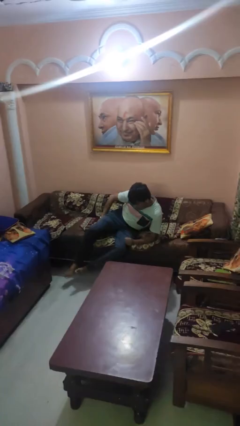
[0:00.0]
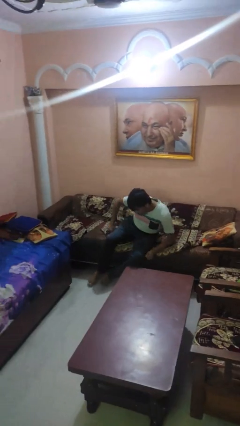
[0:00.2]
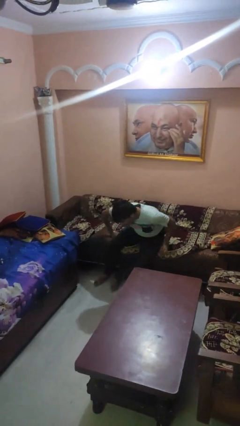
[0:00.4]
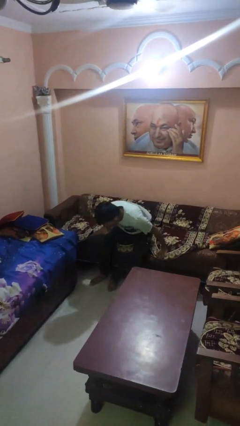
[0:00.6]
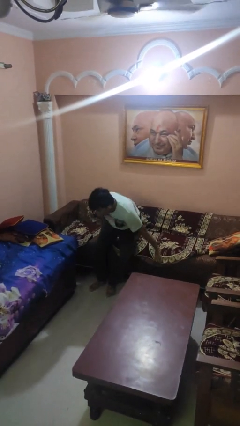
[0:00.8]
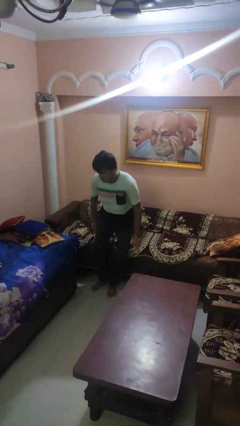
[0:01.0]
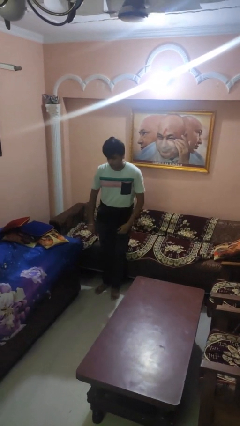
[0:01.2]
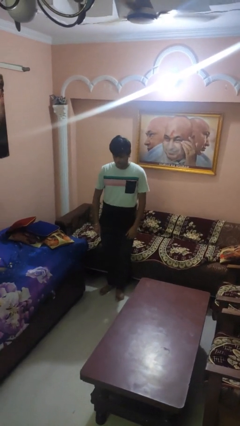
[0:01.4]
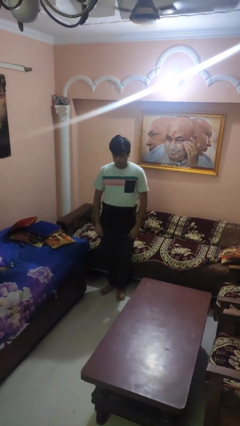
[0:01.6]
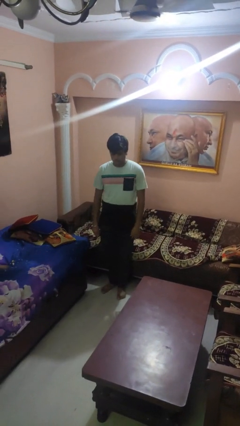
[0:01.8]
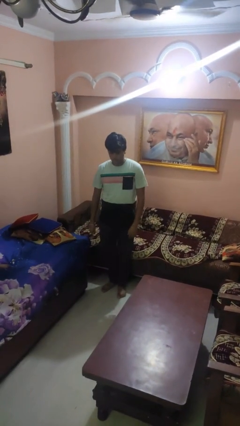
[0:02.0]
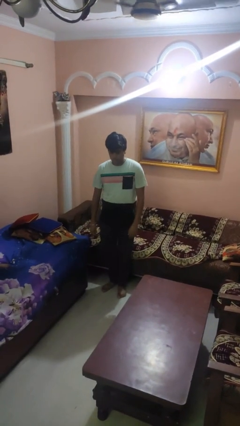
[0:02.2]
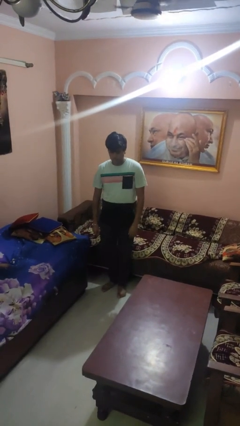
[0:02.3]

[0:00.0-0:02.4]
person stands up

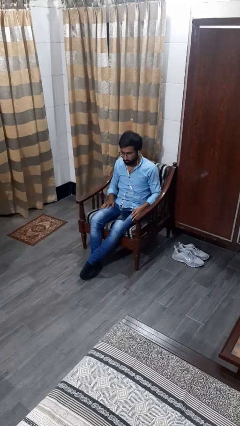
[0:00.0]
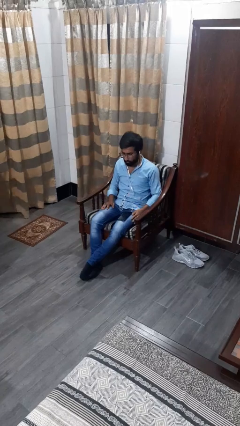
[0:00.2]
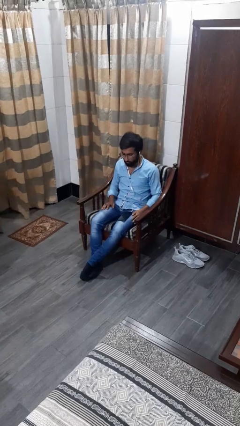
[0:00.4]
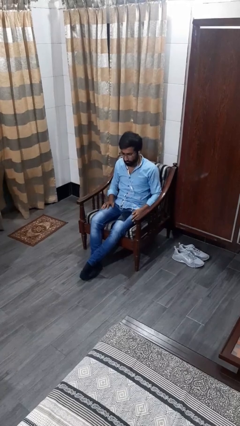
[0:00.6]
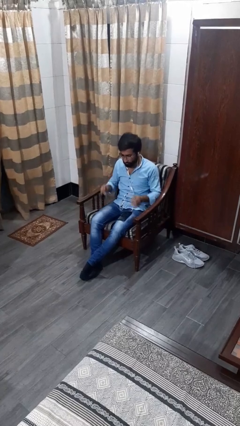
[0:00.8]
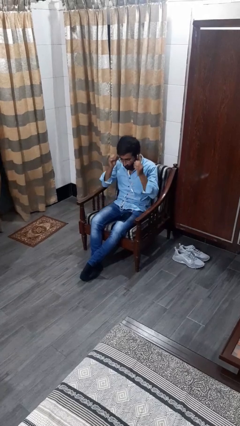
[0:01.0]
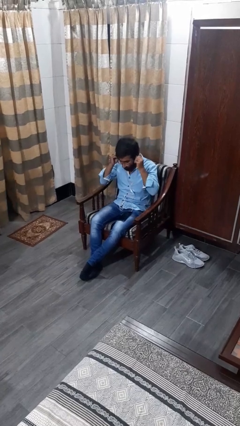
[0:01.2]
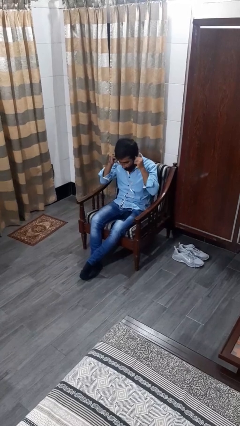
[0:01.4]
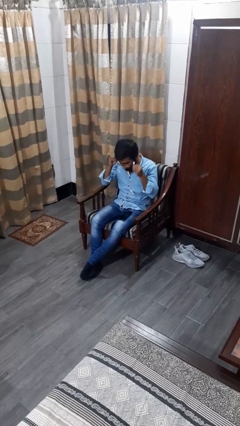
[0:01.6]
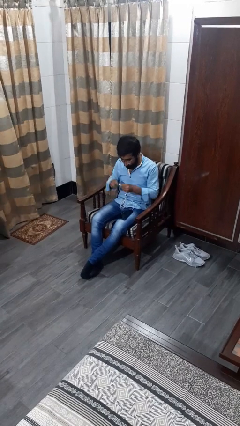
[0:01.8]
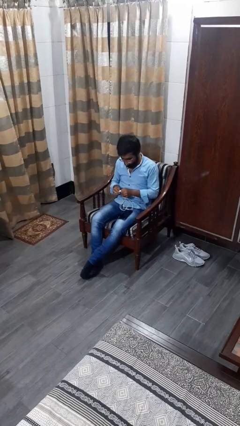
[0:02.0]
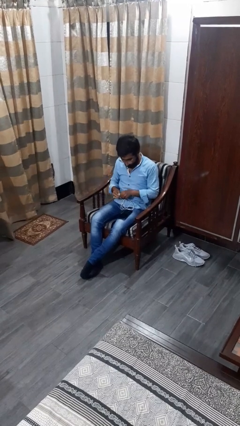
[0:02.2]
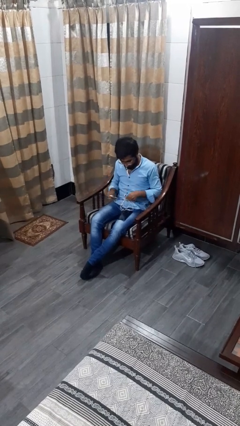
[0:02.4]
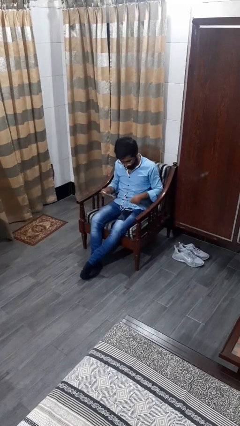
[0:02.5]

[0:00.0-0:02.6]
person takes off headphones

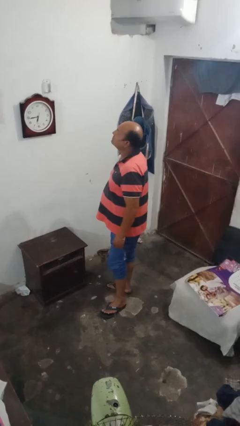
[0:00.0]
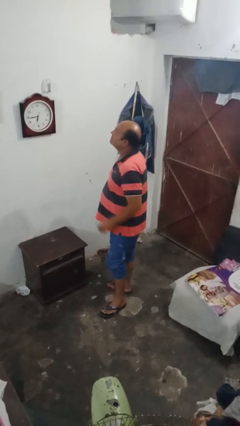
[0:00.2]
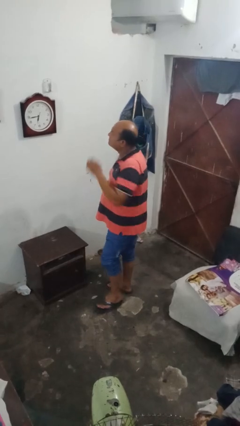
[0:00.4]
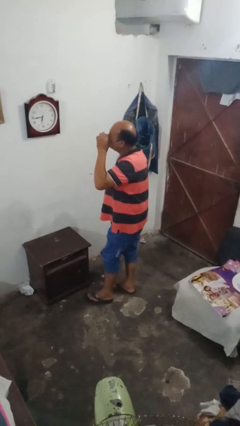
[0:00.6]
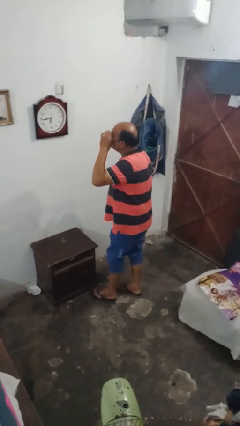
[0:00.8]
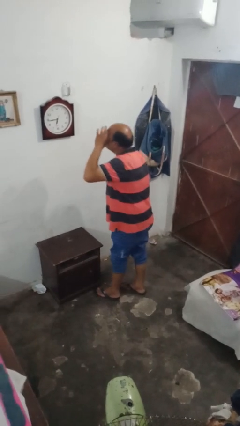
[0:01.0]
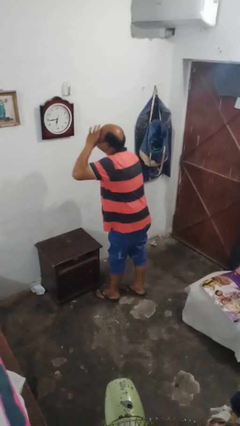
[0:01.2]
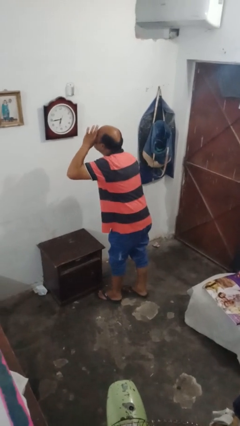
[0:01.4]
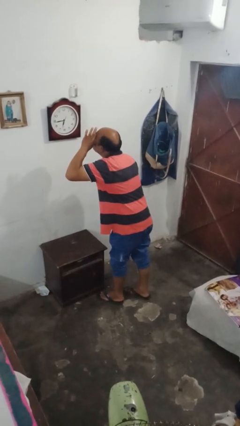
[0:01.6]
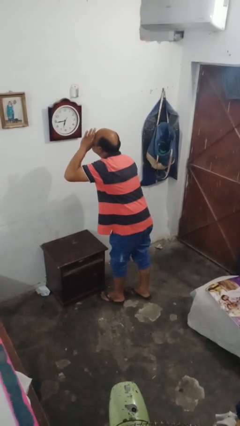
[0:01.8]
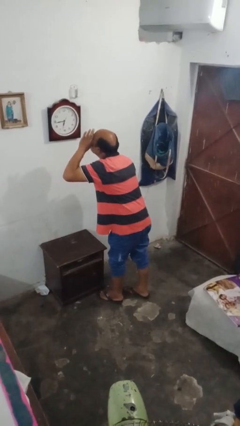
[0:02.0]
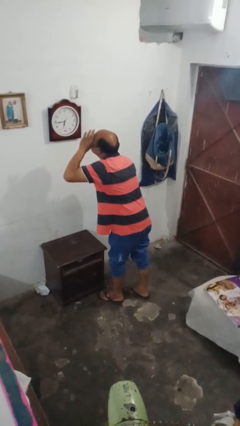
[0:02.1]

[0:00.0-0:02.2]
person gestures watch closely

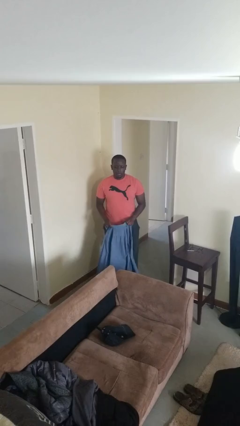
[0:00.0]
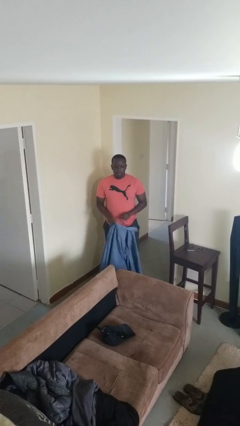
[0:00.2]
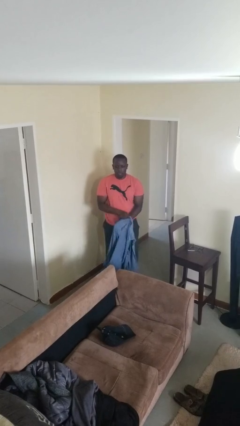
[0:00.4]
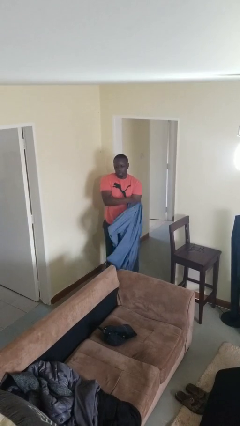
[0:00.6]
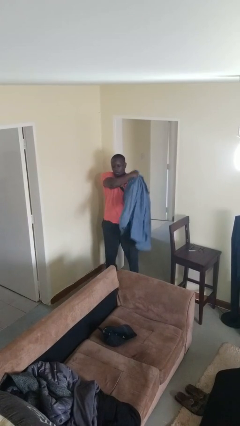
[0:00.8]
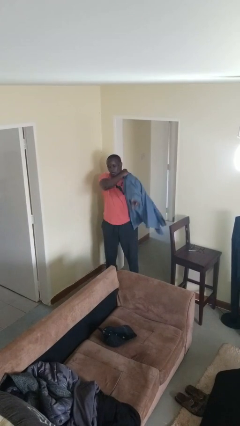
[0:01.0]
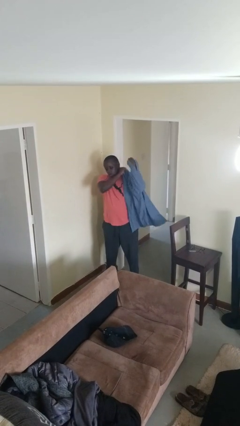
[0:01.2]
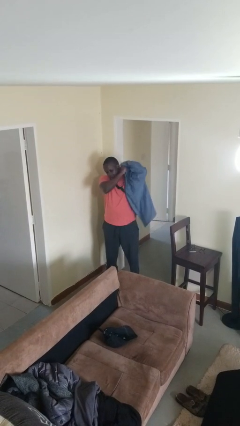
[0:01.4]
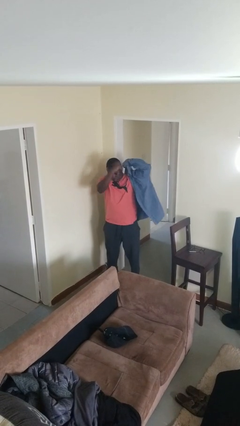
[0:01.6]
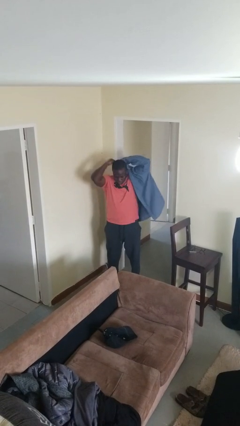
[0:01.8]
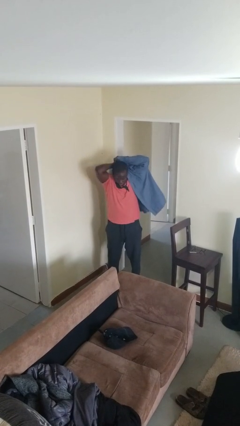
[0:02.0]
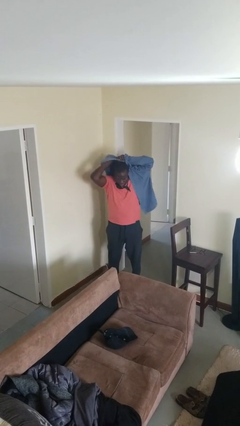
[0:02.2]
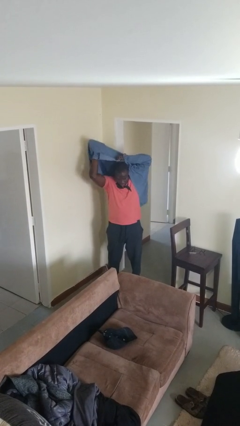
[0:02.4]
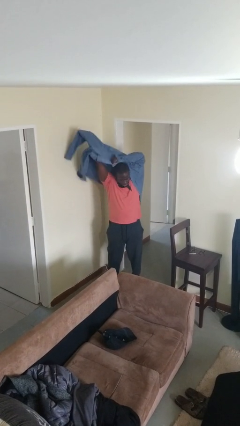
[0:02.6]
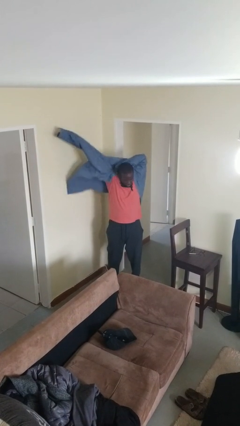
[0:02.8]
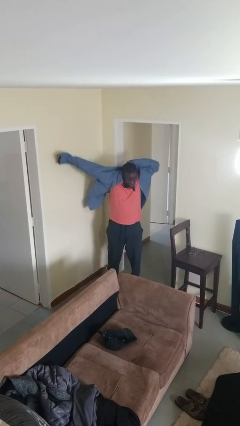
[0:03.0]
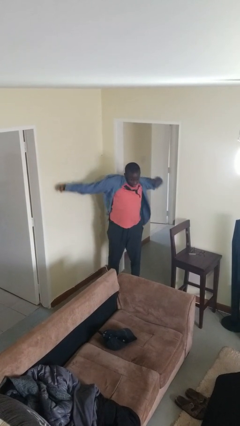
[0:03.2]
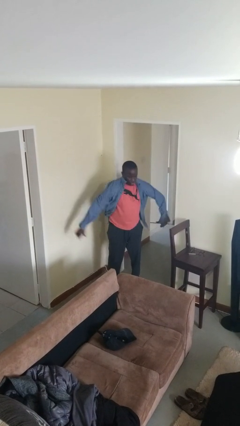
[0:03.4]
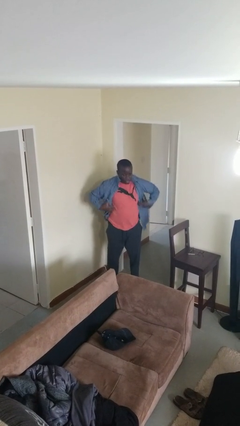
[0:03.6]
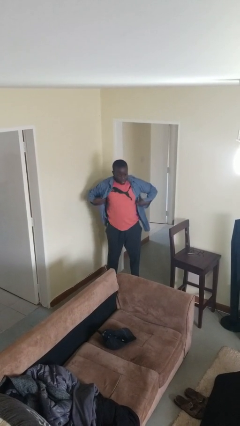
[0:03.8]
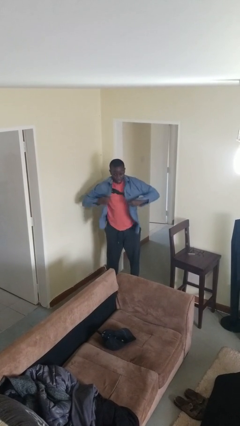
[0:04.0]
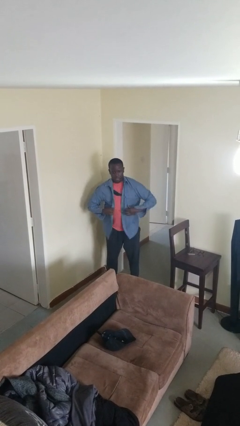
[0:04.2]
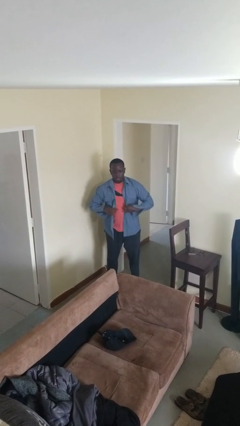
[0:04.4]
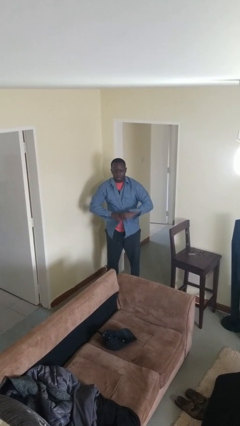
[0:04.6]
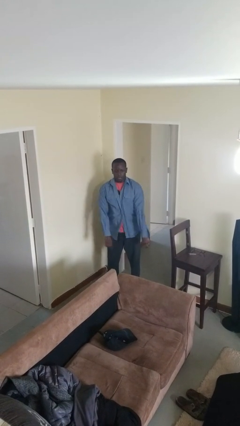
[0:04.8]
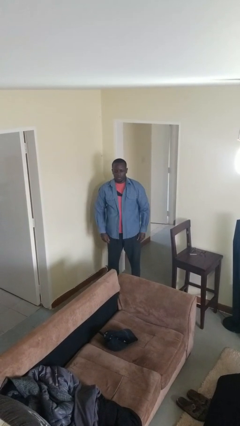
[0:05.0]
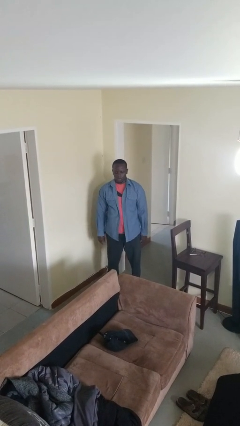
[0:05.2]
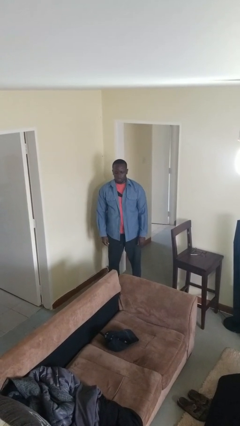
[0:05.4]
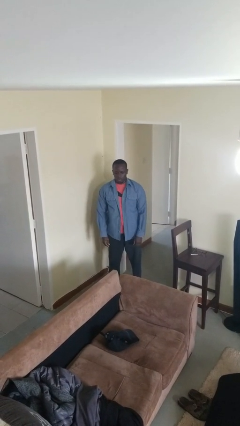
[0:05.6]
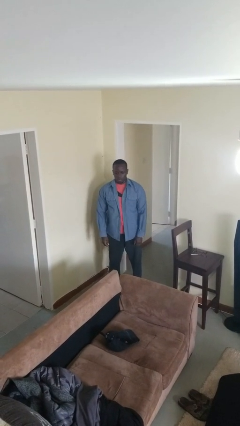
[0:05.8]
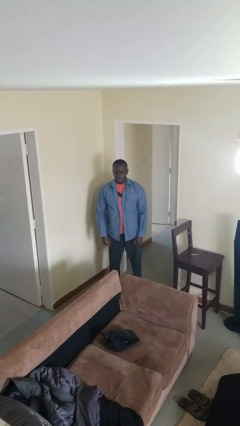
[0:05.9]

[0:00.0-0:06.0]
person puts on shirt

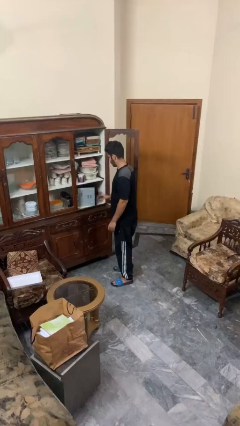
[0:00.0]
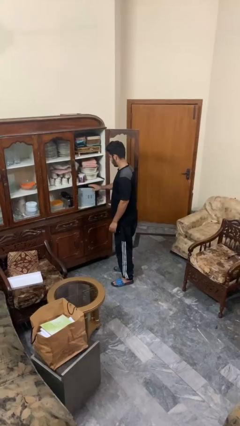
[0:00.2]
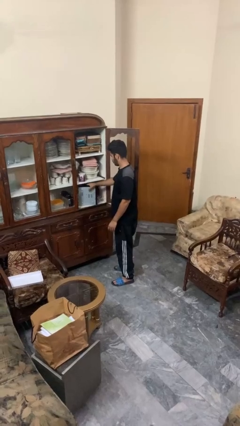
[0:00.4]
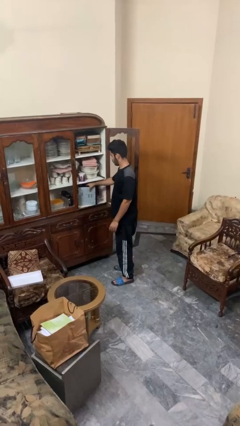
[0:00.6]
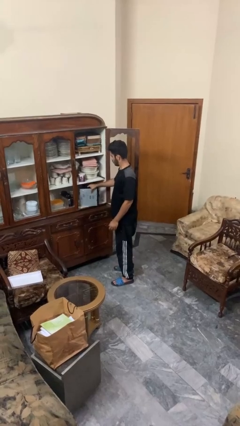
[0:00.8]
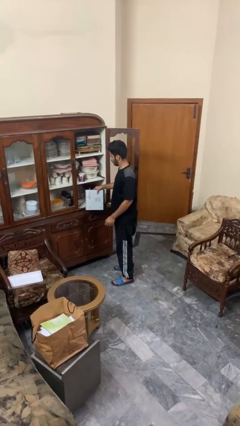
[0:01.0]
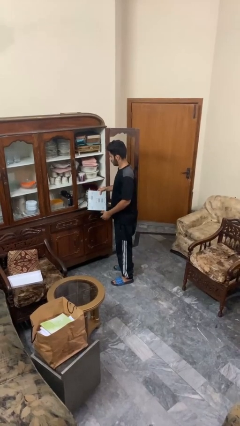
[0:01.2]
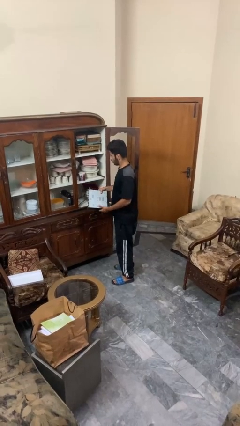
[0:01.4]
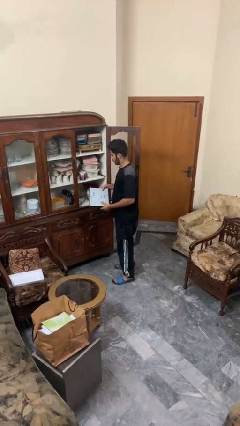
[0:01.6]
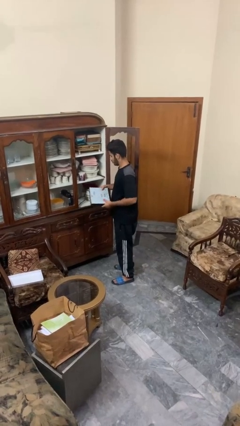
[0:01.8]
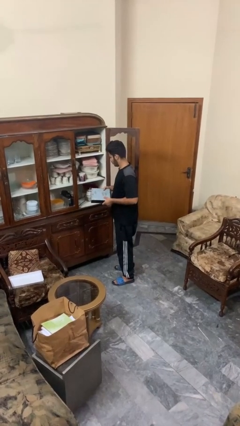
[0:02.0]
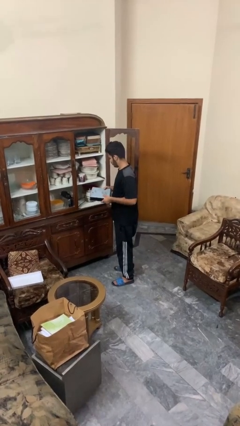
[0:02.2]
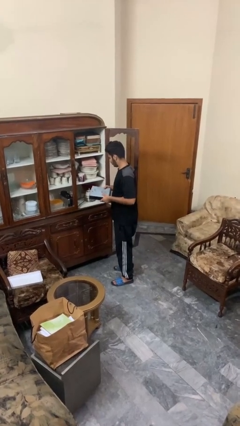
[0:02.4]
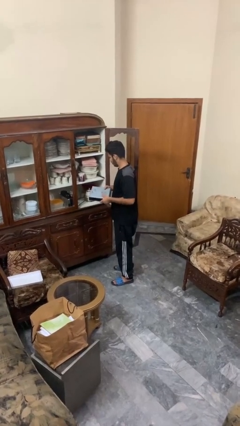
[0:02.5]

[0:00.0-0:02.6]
person picks up object from cabinet

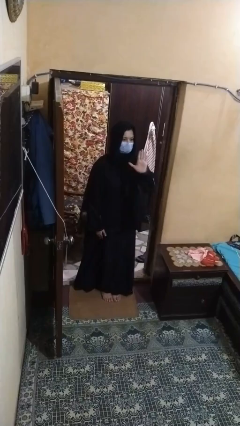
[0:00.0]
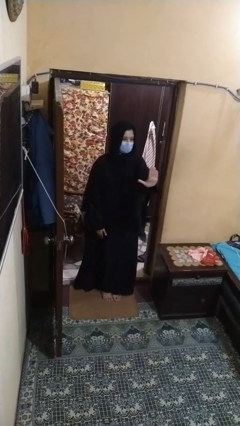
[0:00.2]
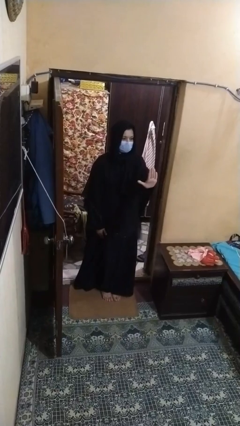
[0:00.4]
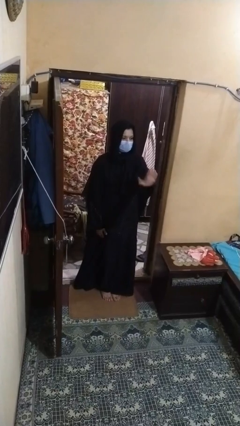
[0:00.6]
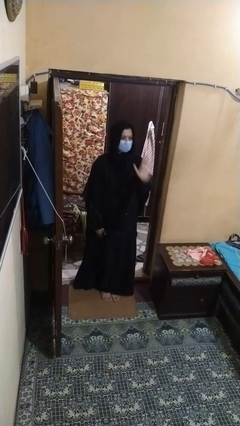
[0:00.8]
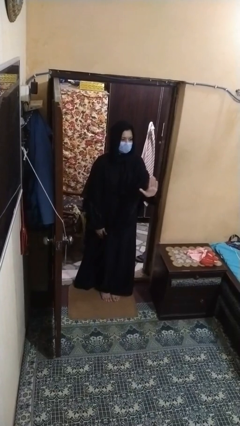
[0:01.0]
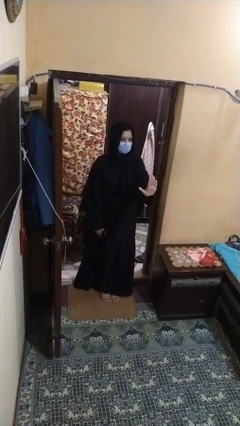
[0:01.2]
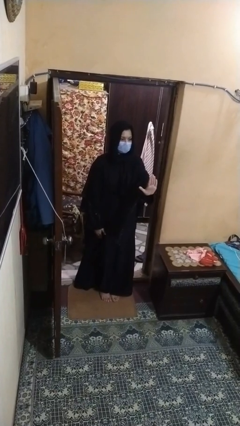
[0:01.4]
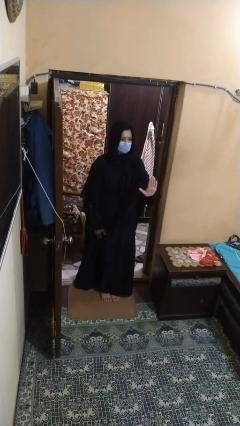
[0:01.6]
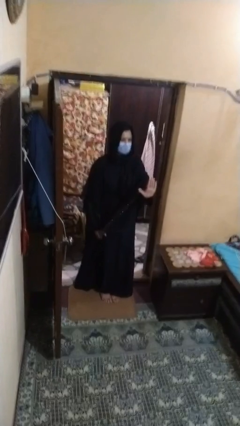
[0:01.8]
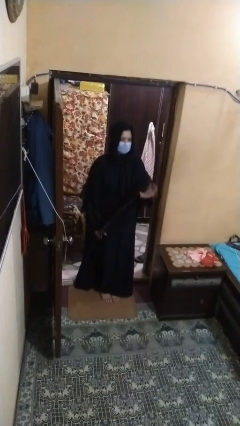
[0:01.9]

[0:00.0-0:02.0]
person gestures stop
